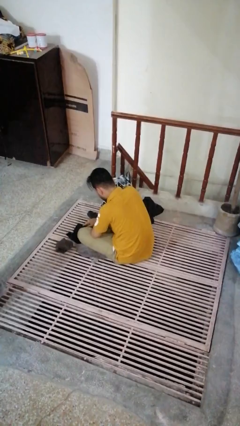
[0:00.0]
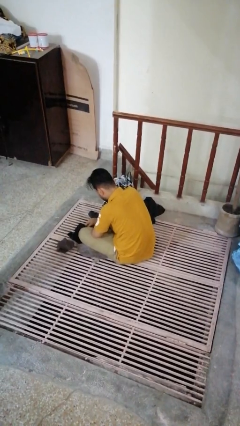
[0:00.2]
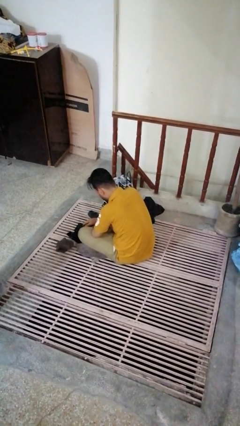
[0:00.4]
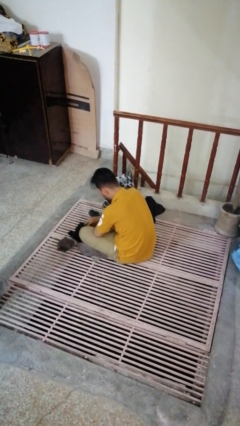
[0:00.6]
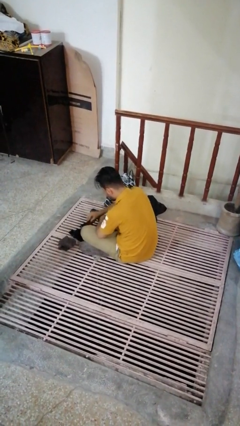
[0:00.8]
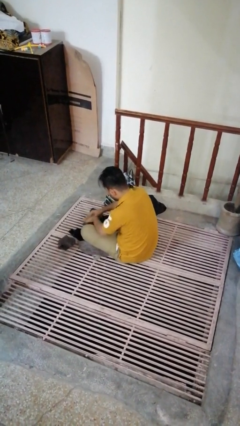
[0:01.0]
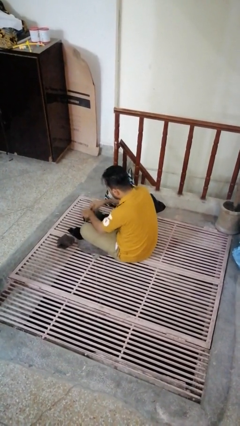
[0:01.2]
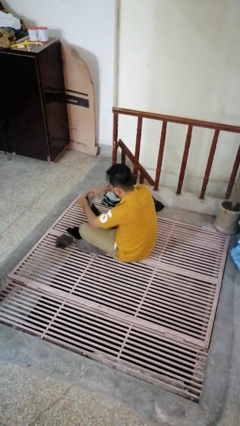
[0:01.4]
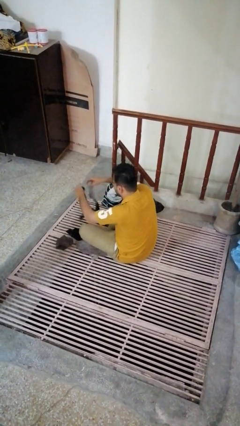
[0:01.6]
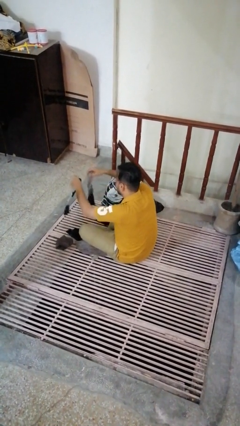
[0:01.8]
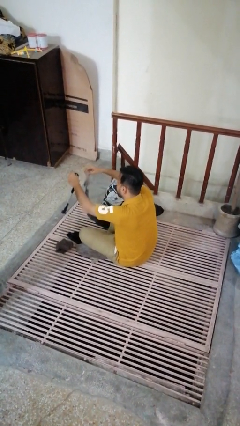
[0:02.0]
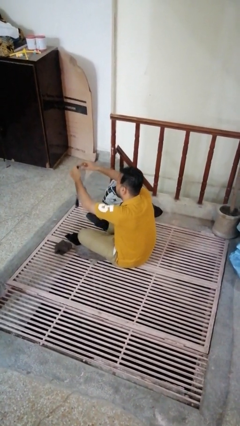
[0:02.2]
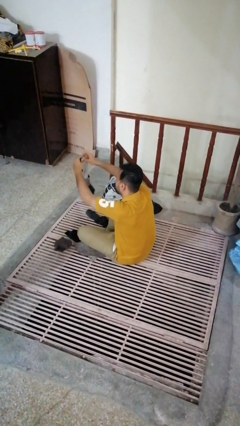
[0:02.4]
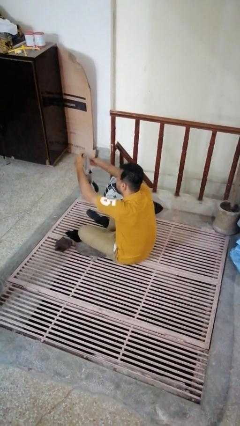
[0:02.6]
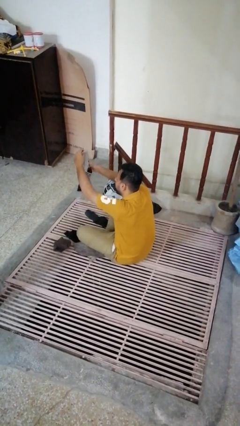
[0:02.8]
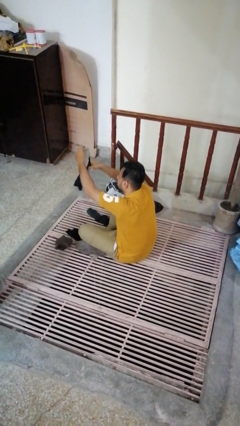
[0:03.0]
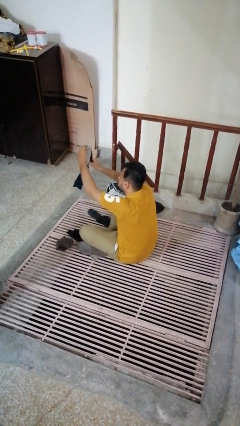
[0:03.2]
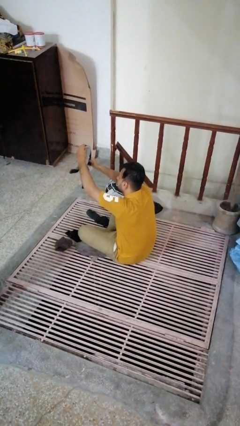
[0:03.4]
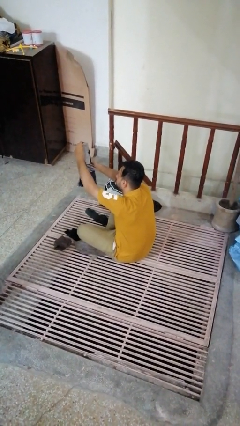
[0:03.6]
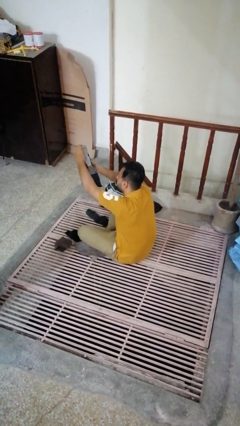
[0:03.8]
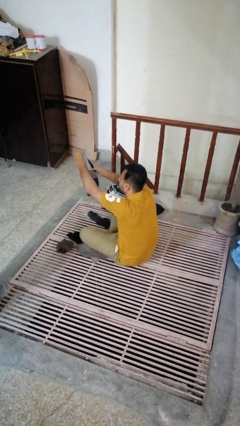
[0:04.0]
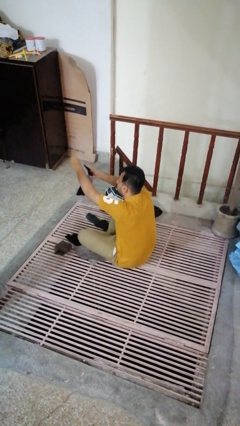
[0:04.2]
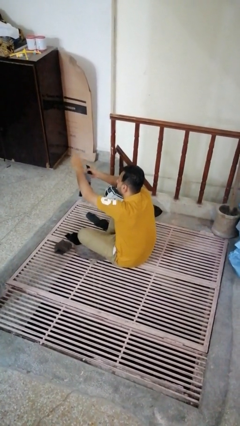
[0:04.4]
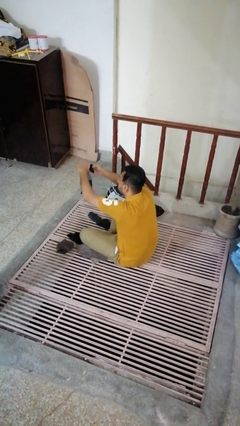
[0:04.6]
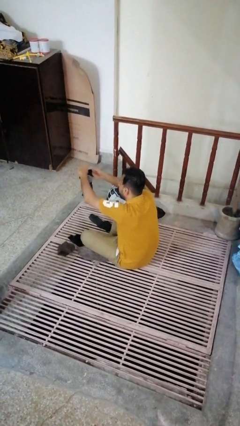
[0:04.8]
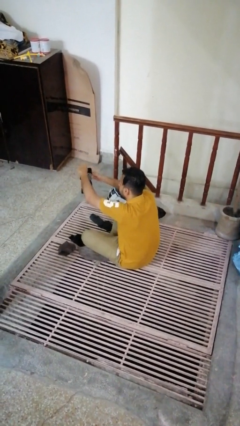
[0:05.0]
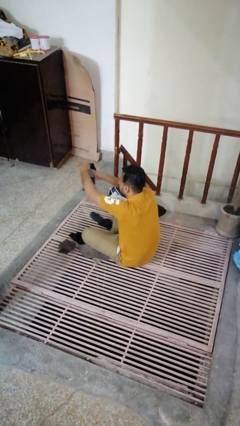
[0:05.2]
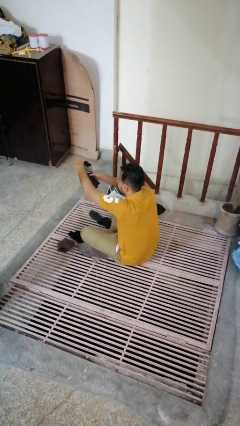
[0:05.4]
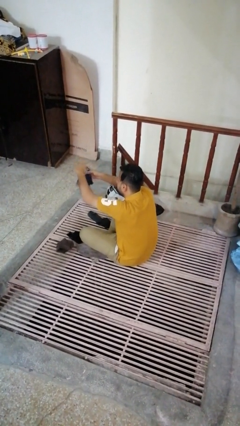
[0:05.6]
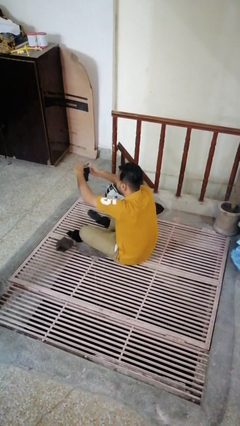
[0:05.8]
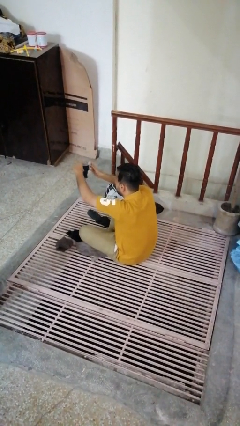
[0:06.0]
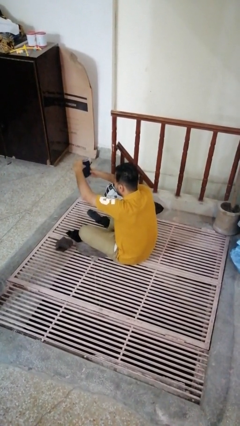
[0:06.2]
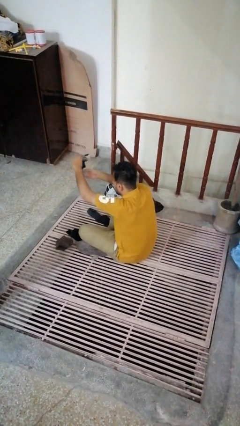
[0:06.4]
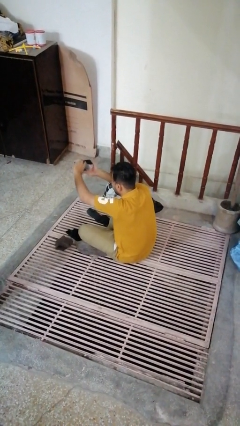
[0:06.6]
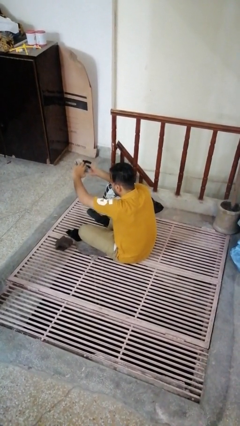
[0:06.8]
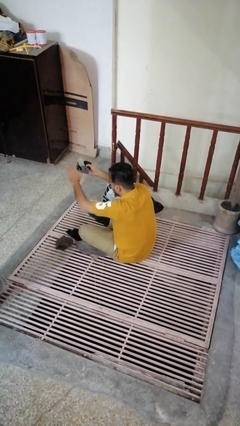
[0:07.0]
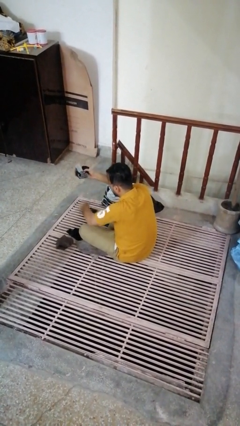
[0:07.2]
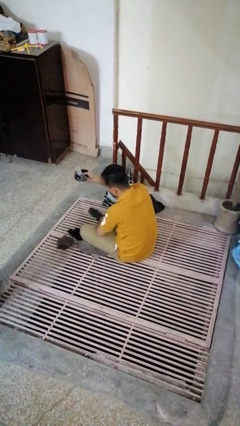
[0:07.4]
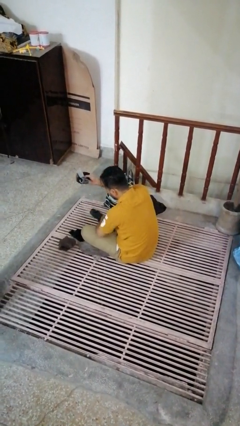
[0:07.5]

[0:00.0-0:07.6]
person folds socks

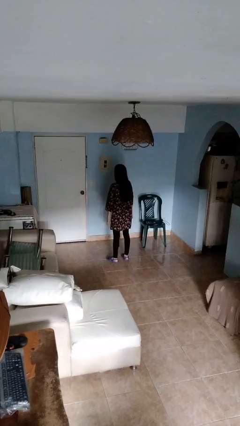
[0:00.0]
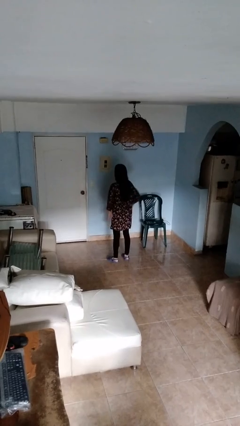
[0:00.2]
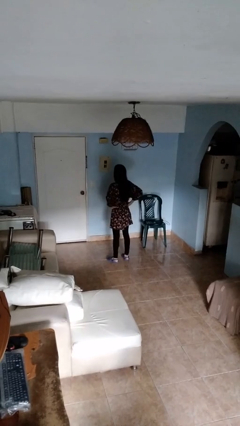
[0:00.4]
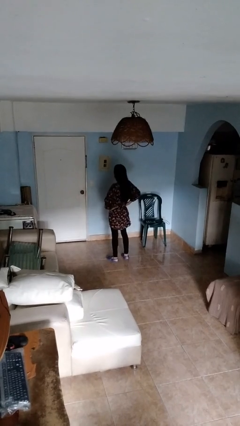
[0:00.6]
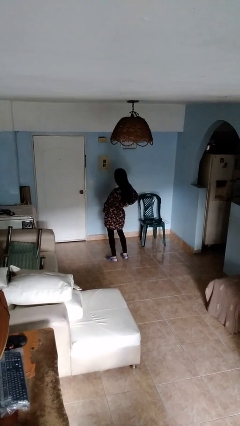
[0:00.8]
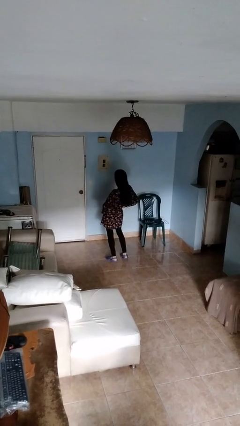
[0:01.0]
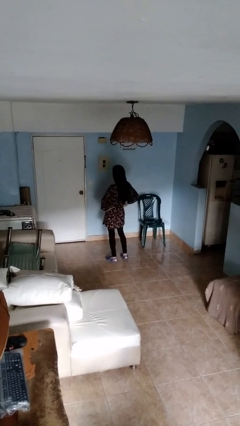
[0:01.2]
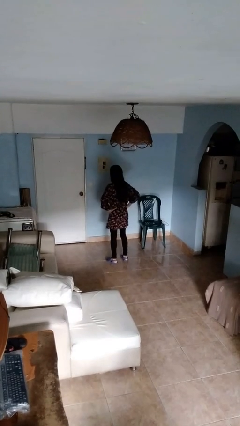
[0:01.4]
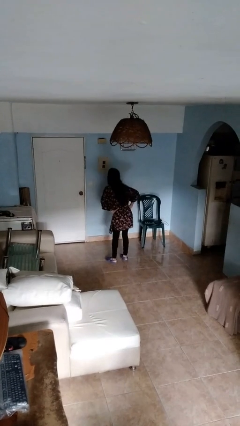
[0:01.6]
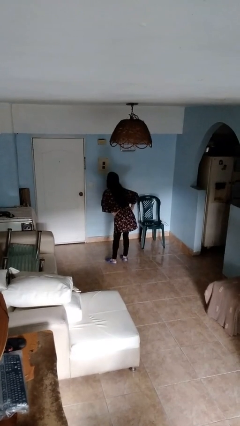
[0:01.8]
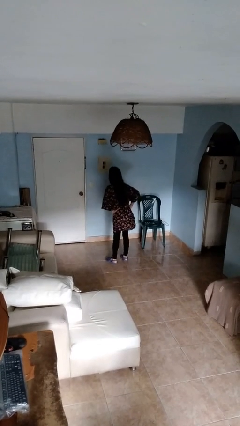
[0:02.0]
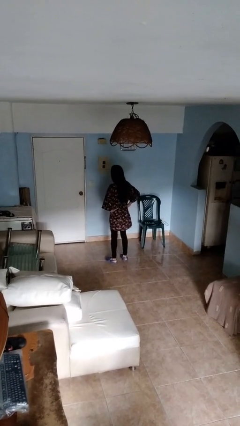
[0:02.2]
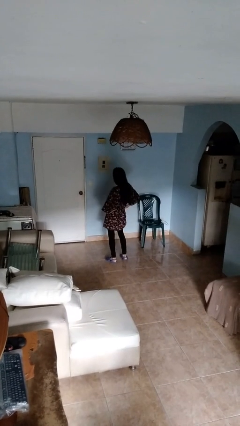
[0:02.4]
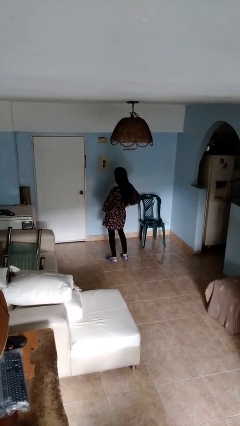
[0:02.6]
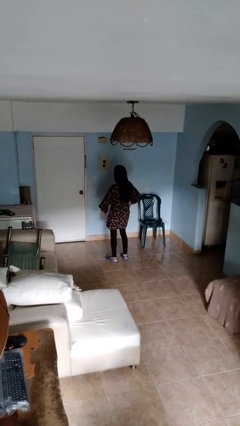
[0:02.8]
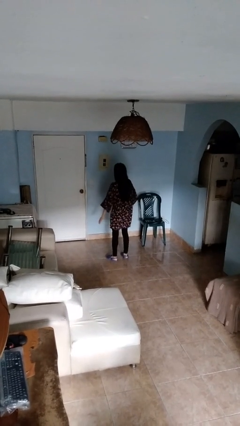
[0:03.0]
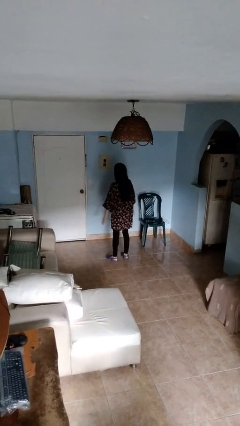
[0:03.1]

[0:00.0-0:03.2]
person wiggles hips

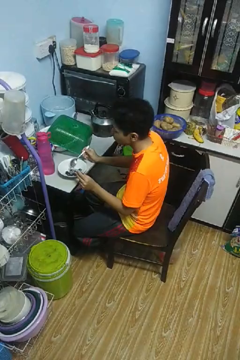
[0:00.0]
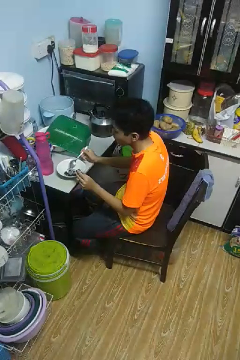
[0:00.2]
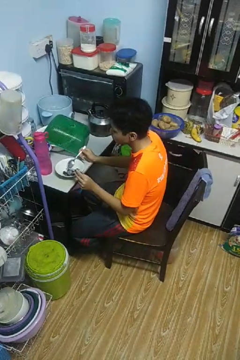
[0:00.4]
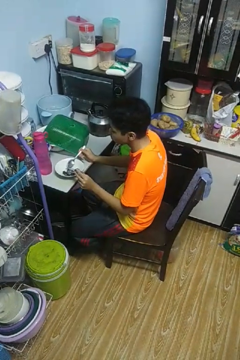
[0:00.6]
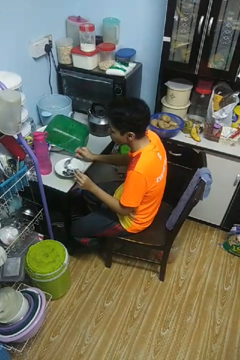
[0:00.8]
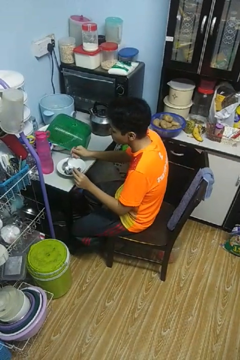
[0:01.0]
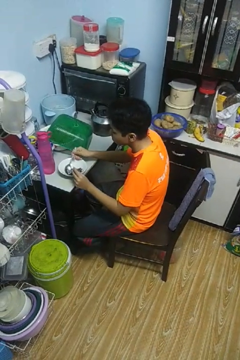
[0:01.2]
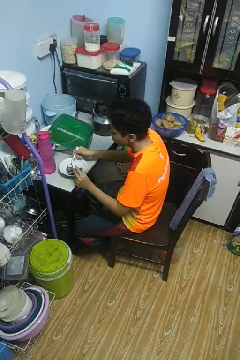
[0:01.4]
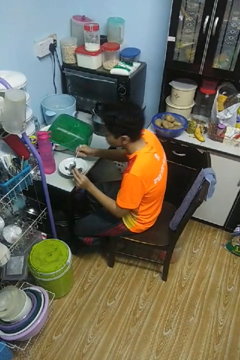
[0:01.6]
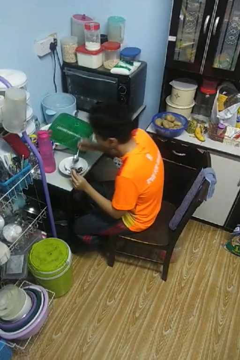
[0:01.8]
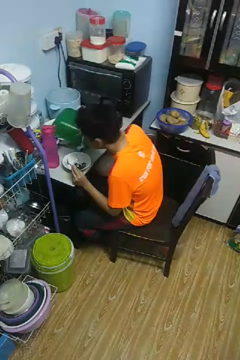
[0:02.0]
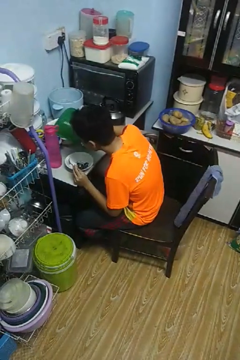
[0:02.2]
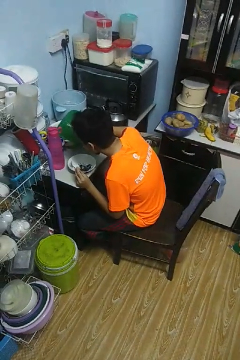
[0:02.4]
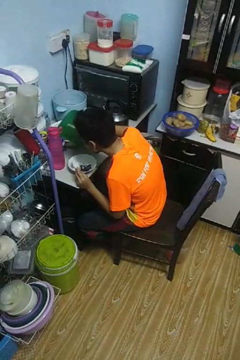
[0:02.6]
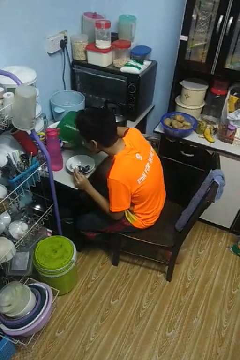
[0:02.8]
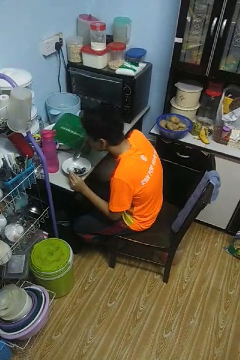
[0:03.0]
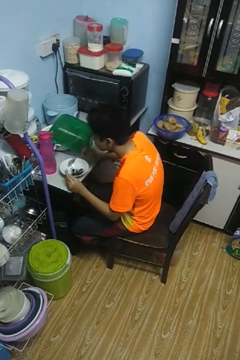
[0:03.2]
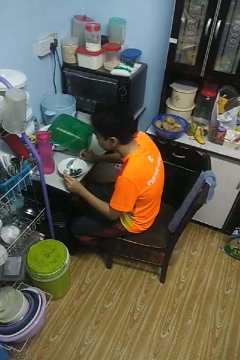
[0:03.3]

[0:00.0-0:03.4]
person eats with utensil

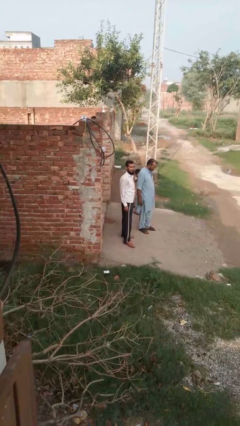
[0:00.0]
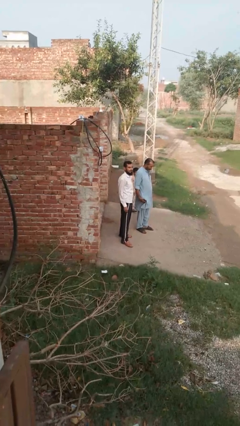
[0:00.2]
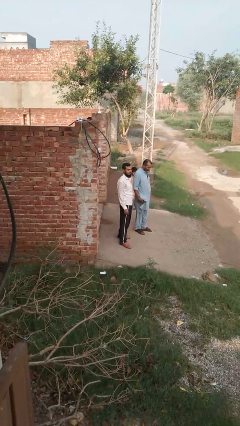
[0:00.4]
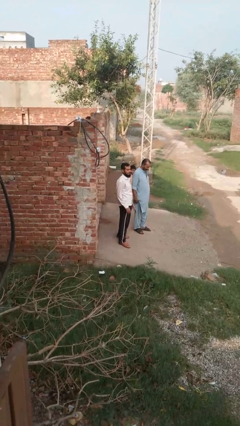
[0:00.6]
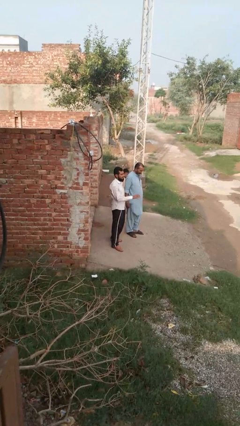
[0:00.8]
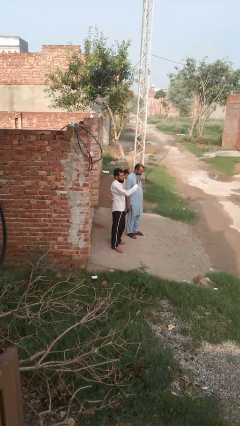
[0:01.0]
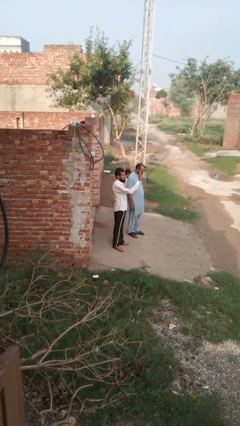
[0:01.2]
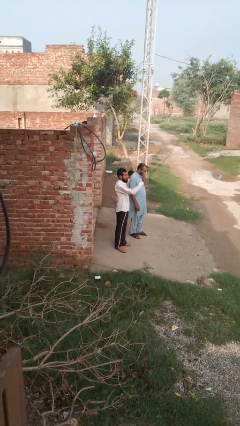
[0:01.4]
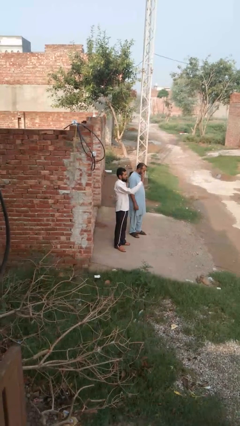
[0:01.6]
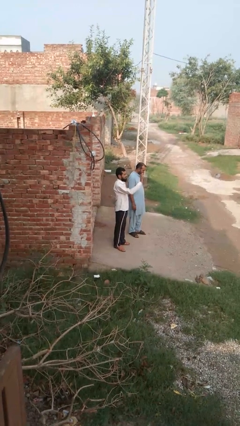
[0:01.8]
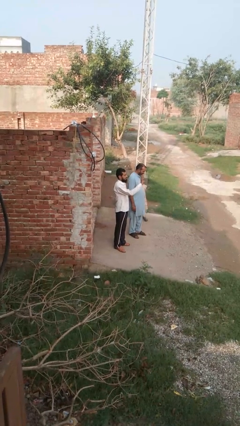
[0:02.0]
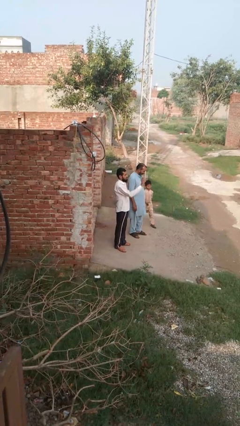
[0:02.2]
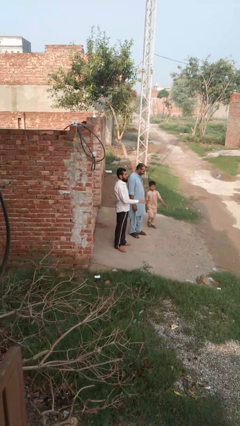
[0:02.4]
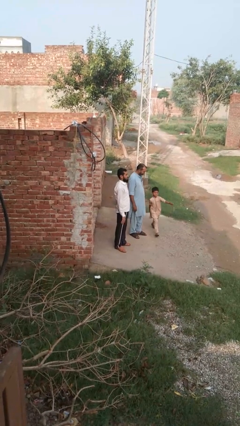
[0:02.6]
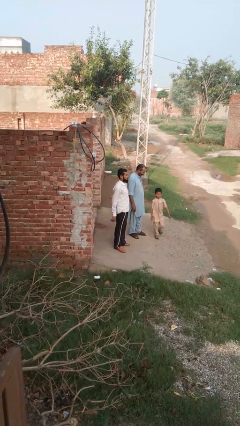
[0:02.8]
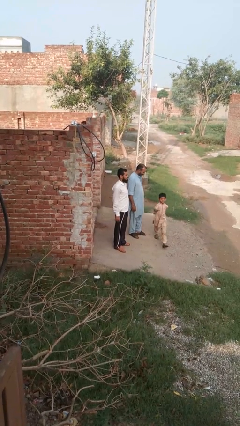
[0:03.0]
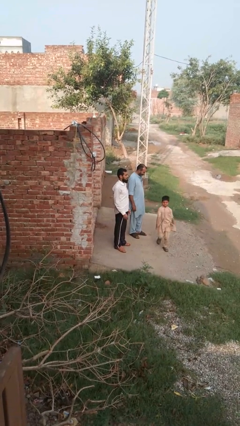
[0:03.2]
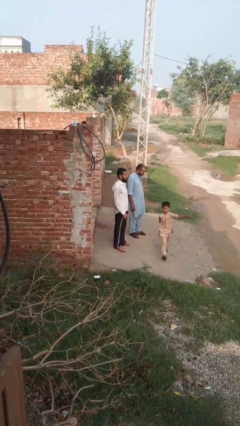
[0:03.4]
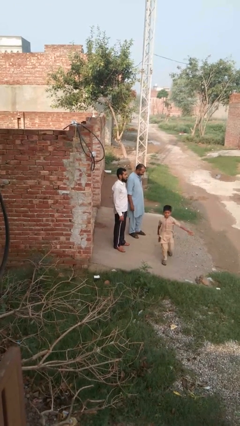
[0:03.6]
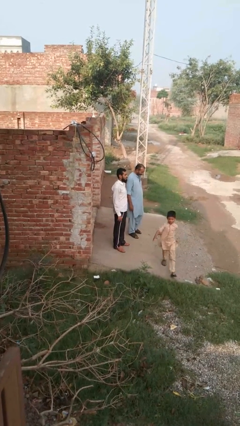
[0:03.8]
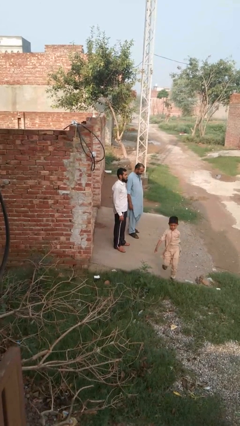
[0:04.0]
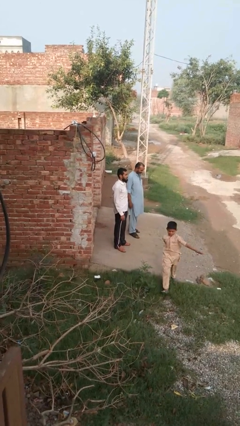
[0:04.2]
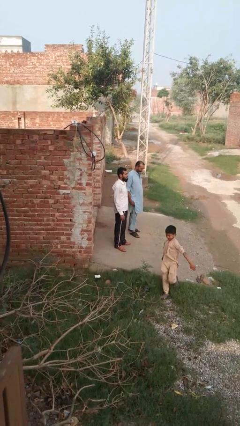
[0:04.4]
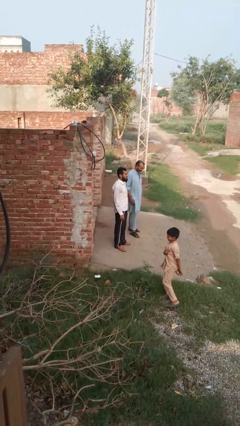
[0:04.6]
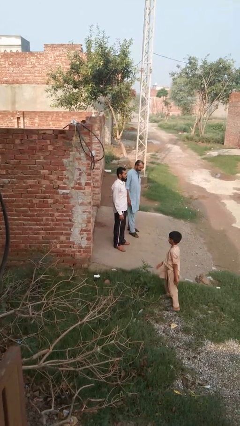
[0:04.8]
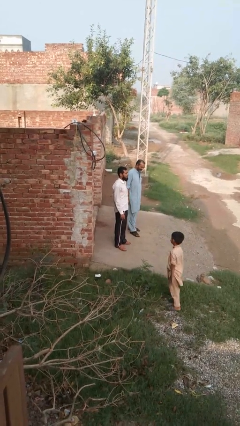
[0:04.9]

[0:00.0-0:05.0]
person waves at person
